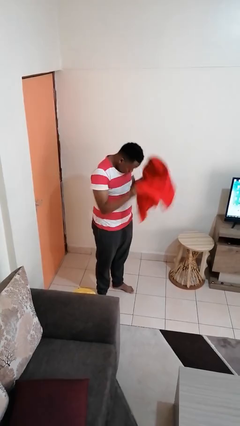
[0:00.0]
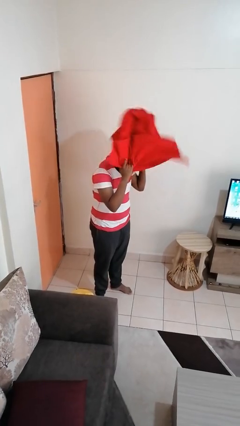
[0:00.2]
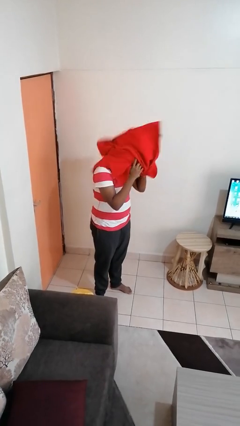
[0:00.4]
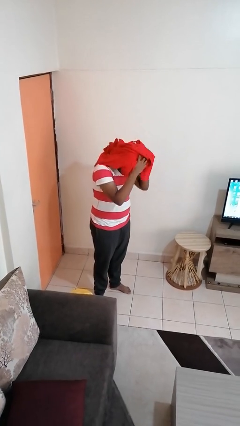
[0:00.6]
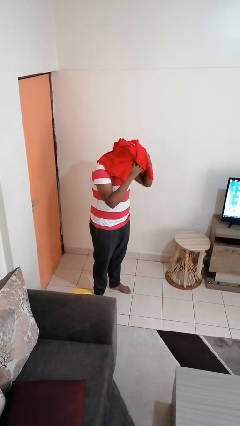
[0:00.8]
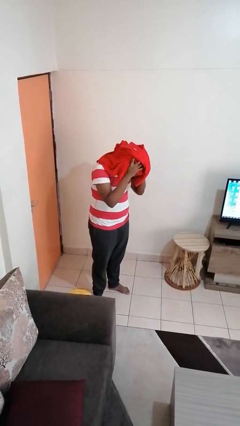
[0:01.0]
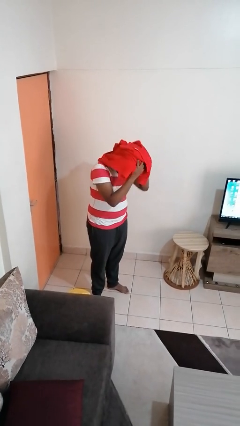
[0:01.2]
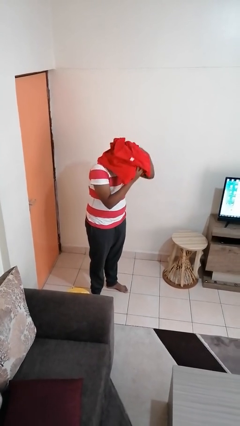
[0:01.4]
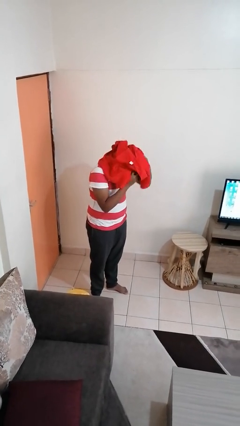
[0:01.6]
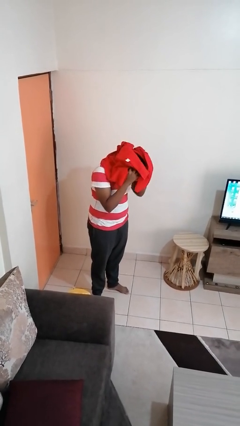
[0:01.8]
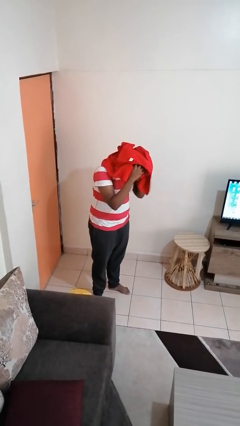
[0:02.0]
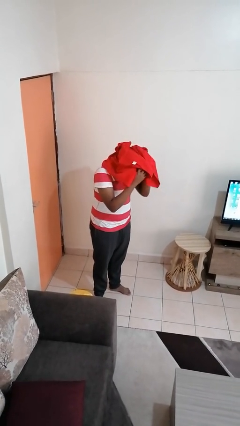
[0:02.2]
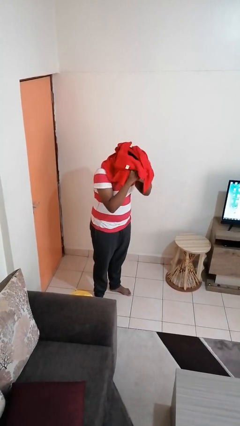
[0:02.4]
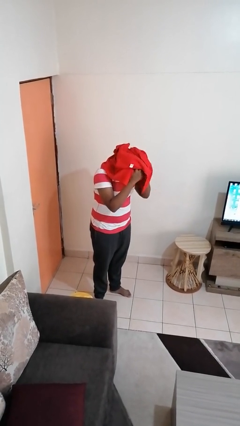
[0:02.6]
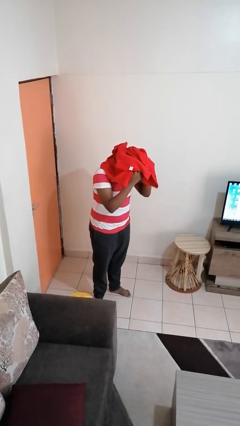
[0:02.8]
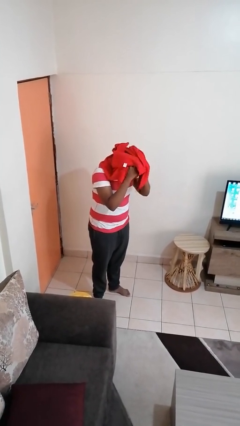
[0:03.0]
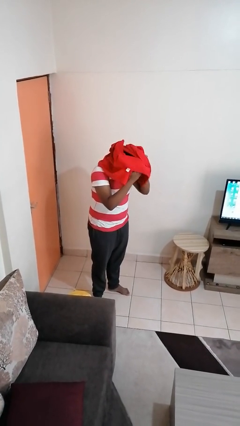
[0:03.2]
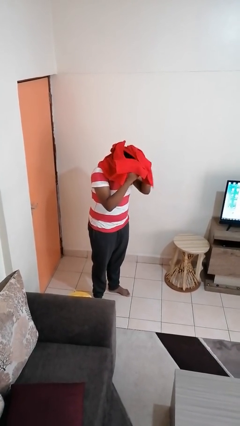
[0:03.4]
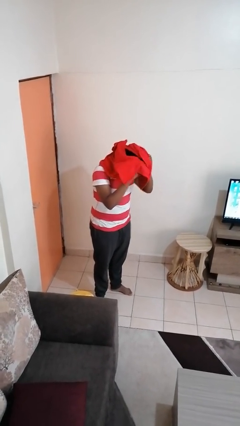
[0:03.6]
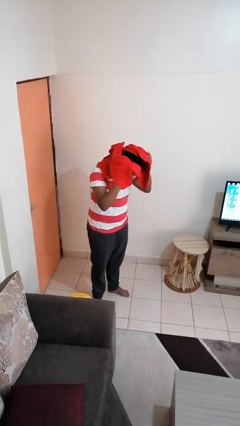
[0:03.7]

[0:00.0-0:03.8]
person dries hair with towel

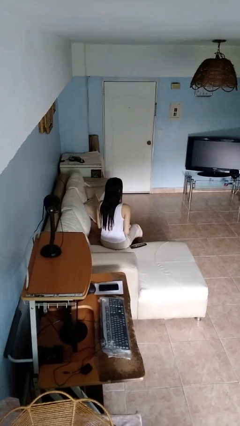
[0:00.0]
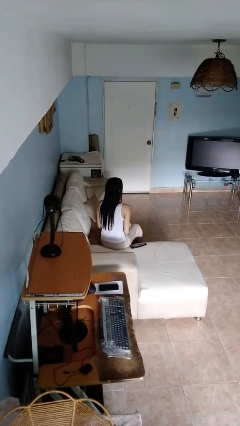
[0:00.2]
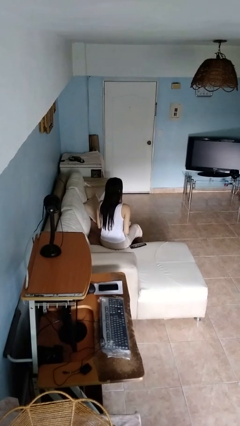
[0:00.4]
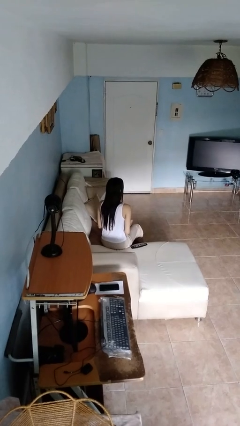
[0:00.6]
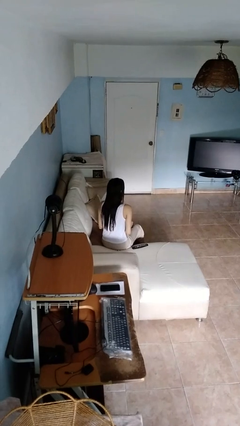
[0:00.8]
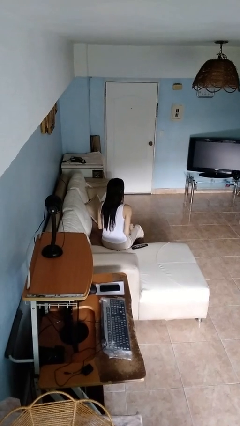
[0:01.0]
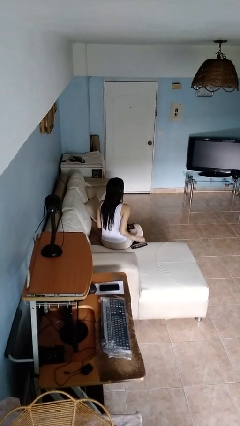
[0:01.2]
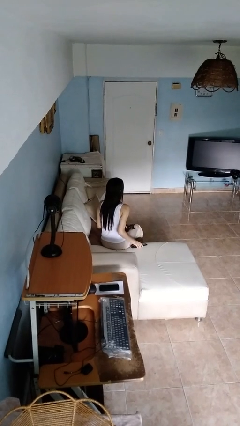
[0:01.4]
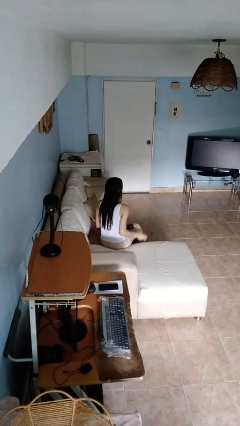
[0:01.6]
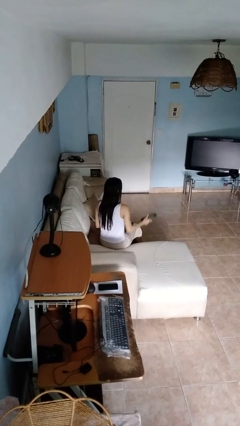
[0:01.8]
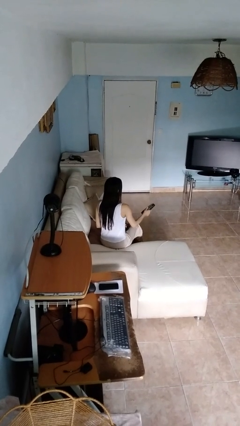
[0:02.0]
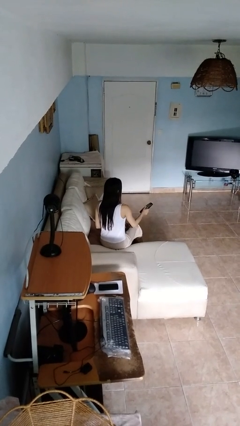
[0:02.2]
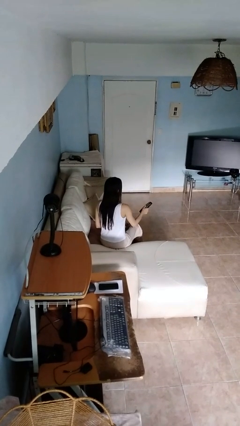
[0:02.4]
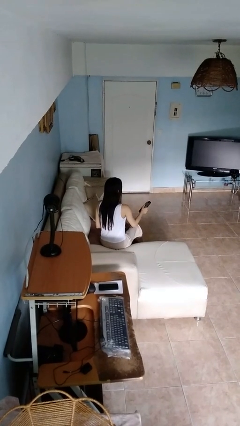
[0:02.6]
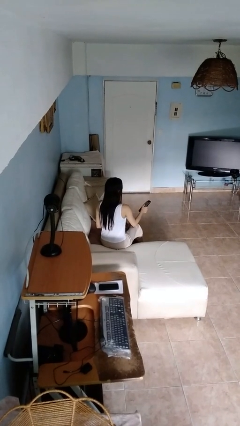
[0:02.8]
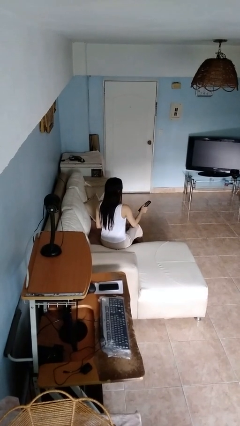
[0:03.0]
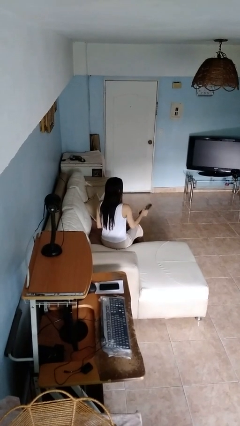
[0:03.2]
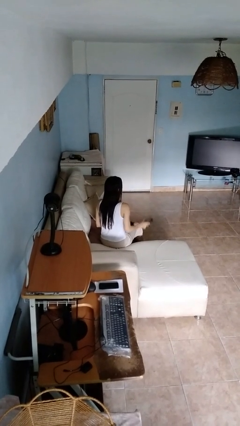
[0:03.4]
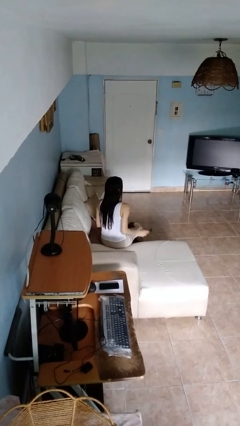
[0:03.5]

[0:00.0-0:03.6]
person uses television remote

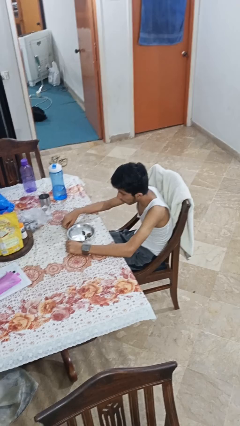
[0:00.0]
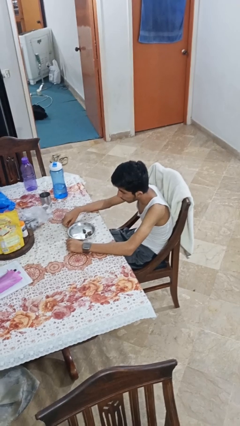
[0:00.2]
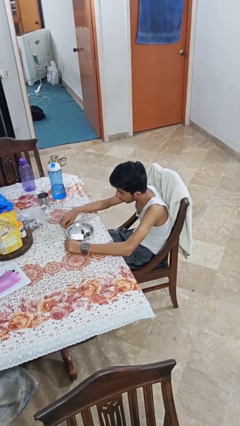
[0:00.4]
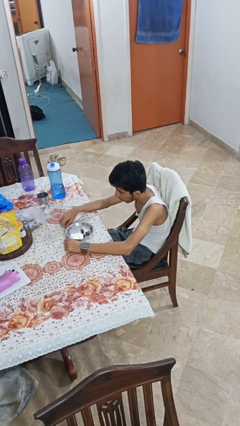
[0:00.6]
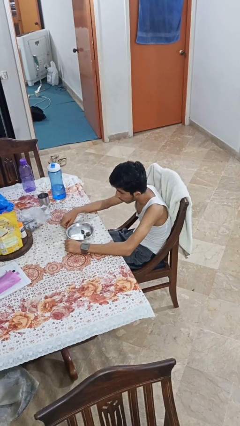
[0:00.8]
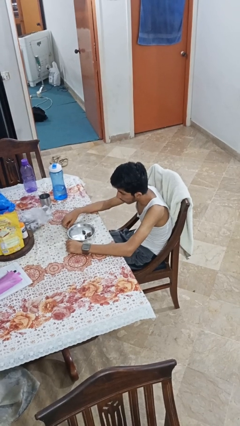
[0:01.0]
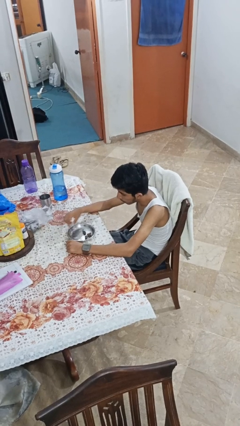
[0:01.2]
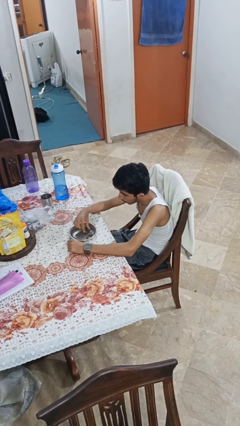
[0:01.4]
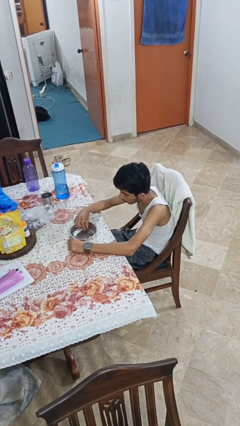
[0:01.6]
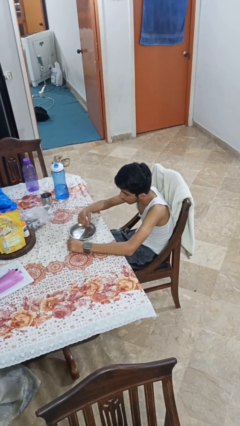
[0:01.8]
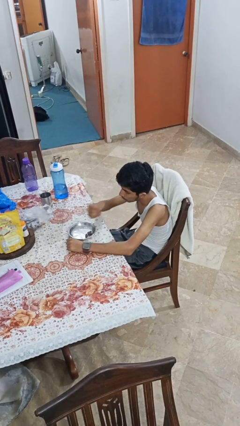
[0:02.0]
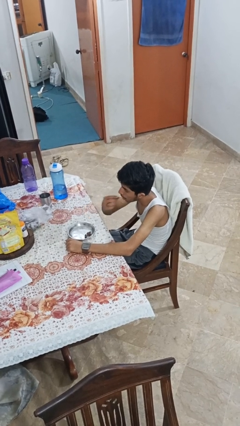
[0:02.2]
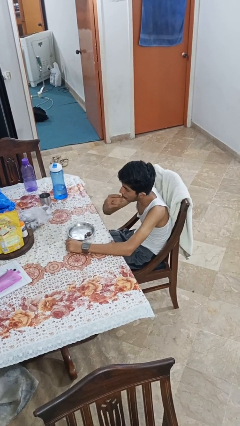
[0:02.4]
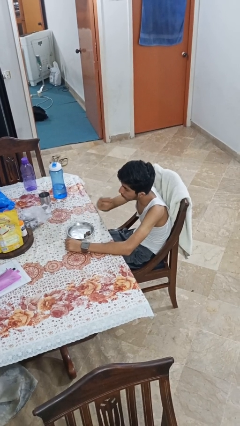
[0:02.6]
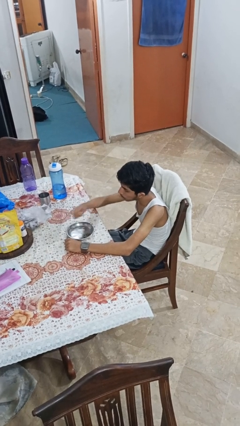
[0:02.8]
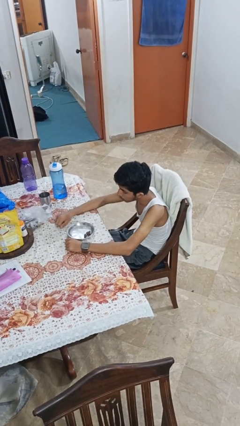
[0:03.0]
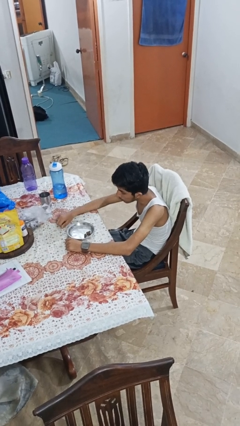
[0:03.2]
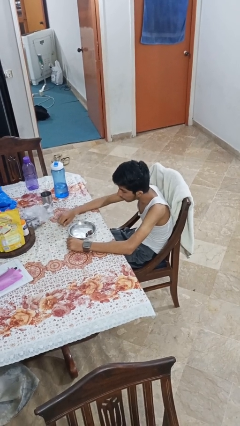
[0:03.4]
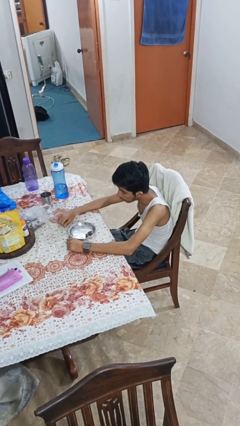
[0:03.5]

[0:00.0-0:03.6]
person eats with hands

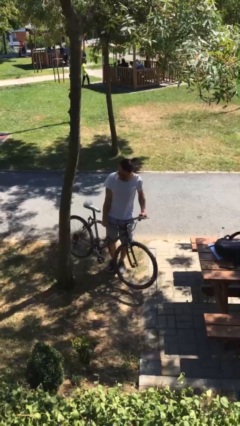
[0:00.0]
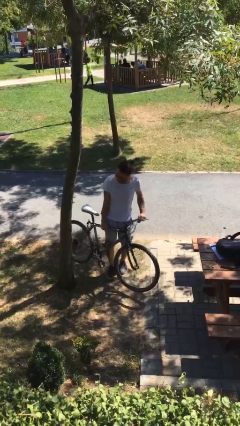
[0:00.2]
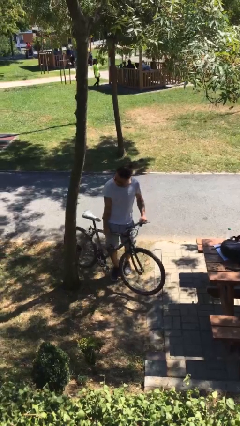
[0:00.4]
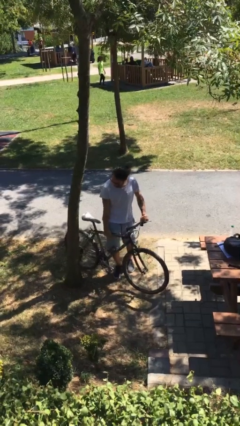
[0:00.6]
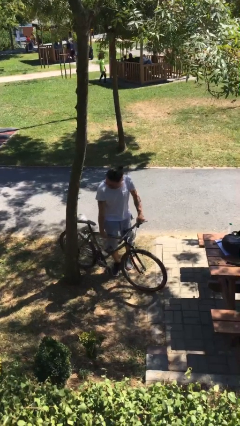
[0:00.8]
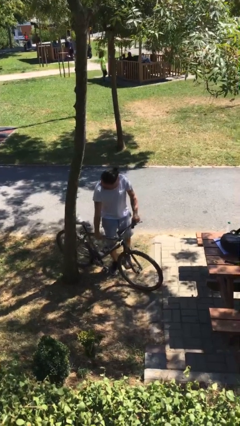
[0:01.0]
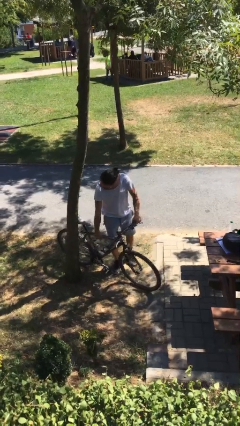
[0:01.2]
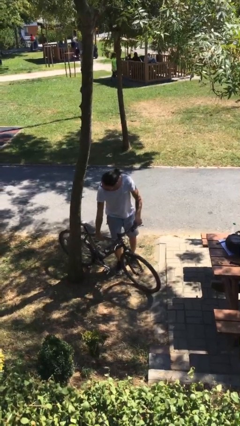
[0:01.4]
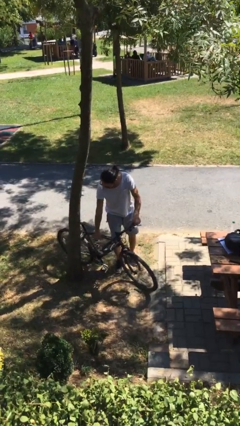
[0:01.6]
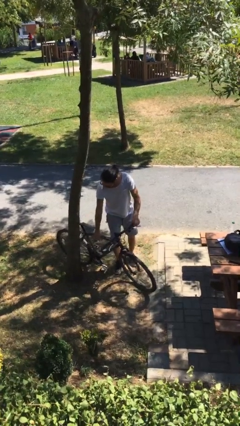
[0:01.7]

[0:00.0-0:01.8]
person puts down object on floor

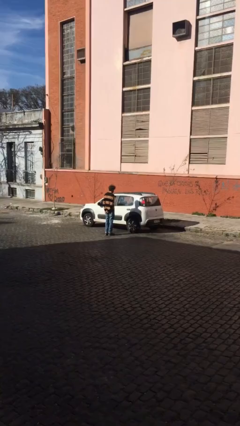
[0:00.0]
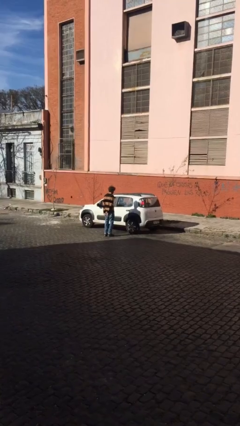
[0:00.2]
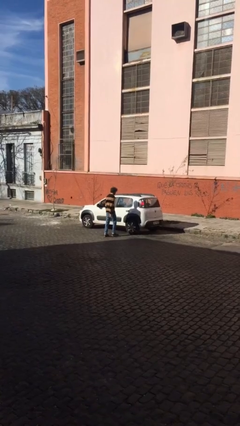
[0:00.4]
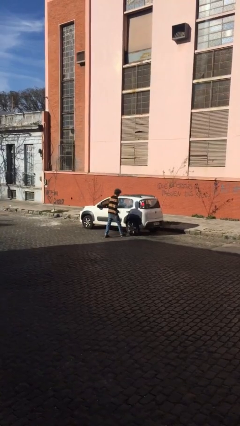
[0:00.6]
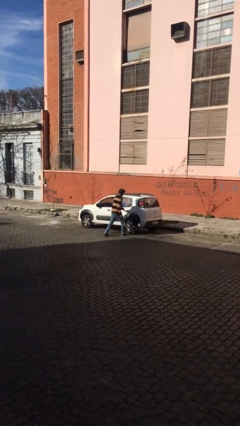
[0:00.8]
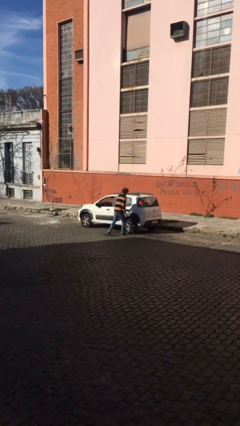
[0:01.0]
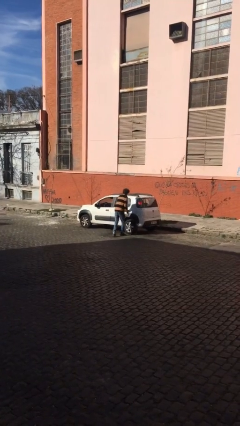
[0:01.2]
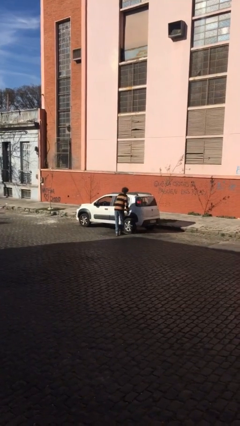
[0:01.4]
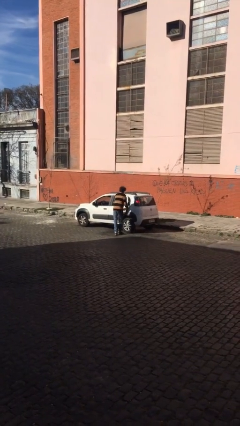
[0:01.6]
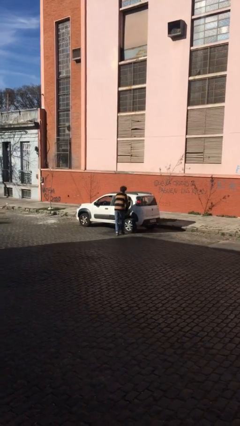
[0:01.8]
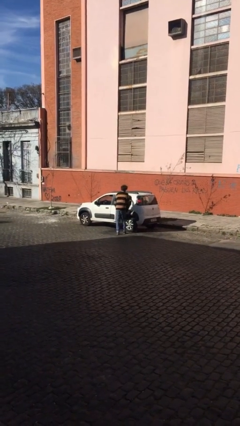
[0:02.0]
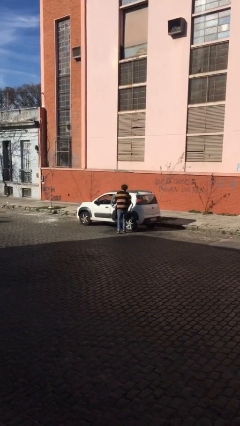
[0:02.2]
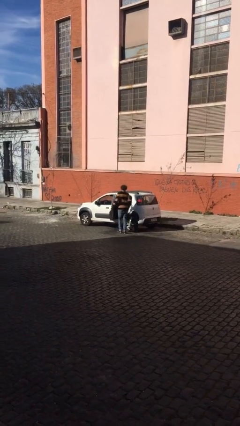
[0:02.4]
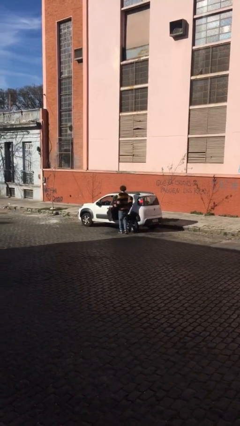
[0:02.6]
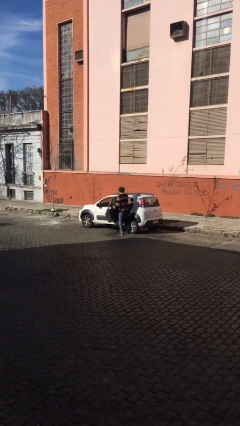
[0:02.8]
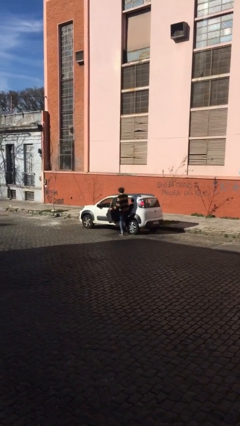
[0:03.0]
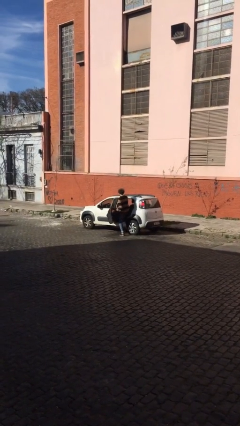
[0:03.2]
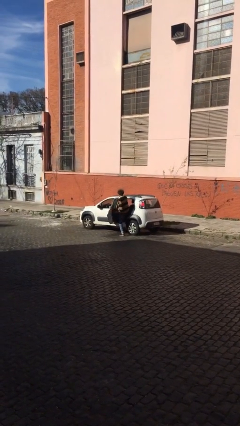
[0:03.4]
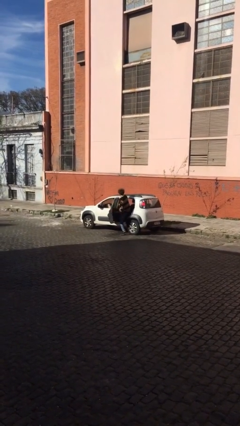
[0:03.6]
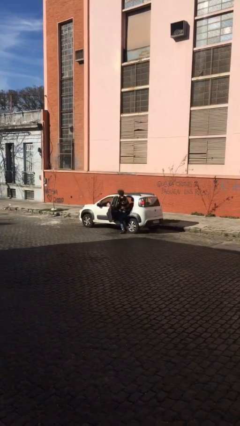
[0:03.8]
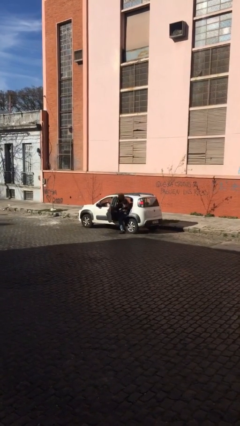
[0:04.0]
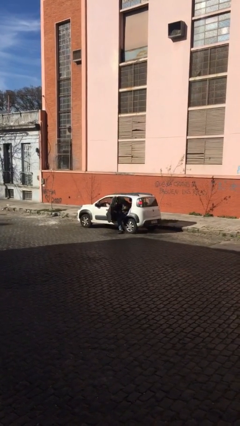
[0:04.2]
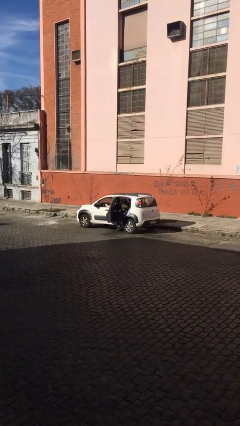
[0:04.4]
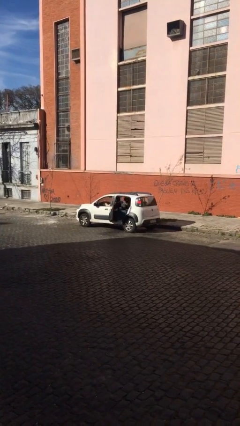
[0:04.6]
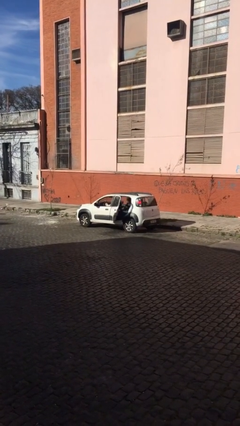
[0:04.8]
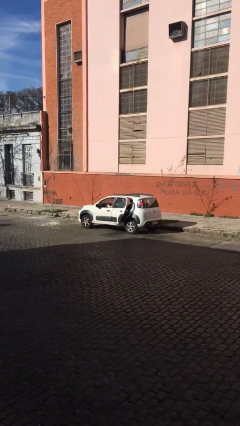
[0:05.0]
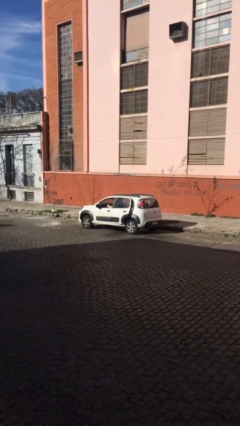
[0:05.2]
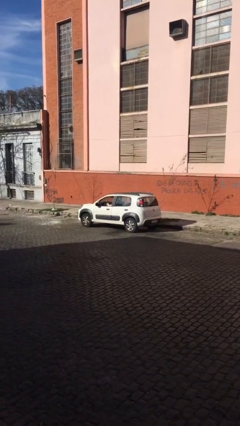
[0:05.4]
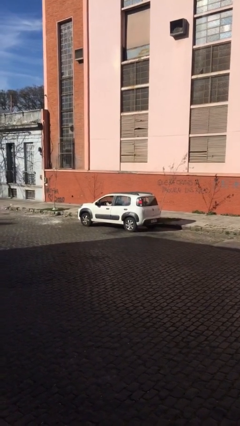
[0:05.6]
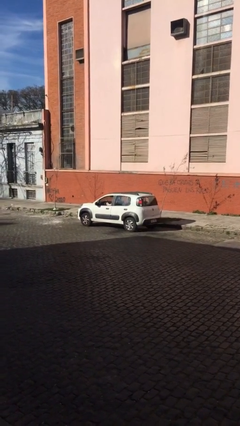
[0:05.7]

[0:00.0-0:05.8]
car picks up person
